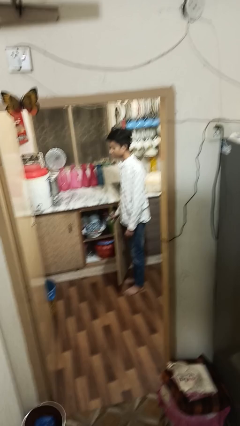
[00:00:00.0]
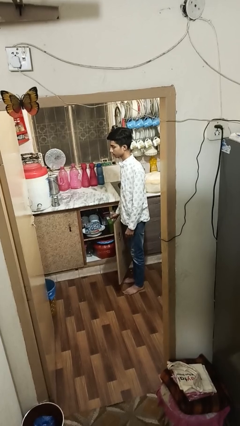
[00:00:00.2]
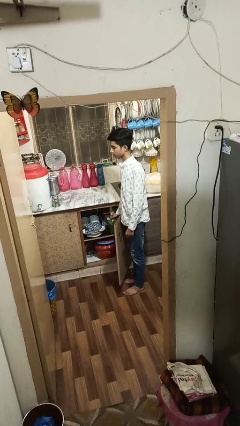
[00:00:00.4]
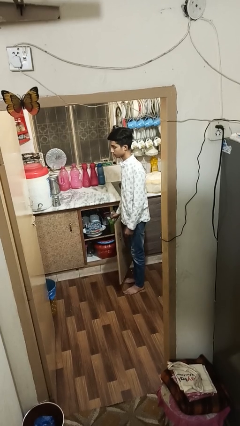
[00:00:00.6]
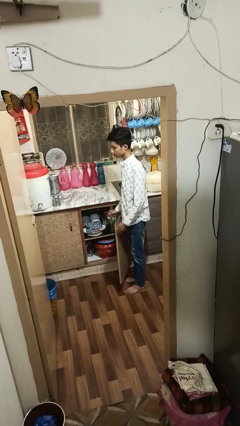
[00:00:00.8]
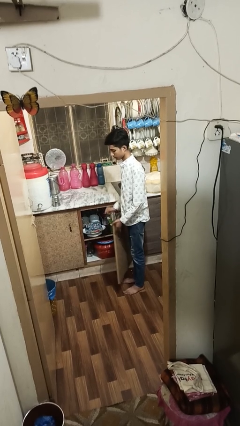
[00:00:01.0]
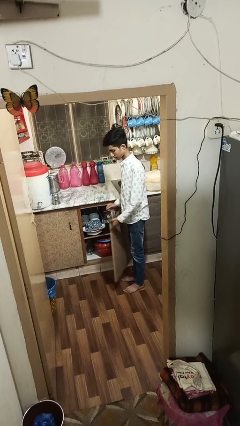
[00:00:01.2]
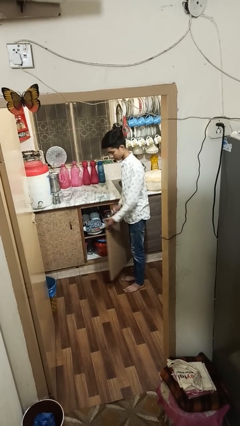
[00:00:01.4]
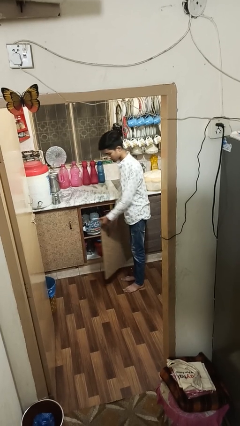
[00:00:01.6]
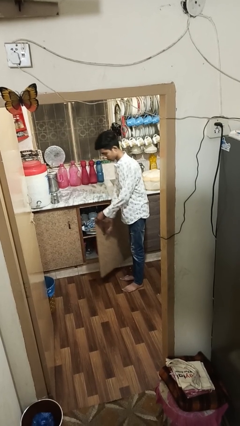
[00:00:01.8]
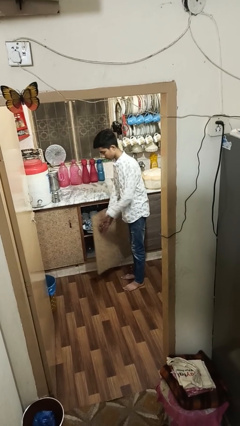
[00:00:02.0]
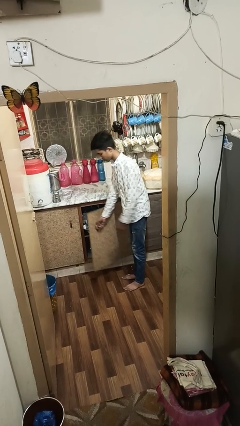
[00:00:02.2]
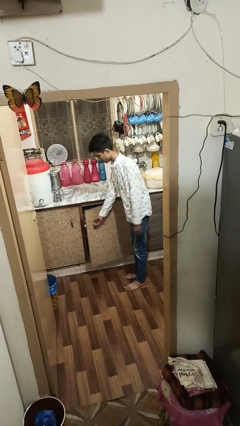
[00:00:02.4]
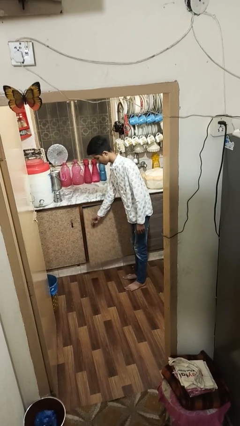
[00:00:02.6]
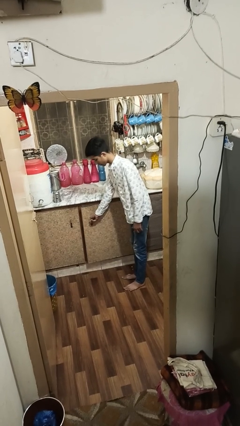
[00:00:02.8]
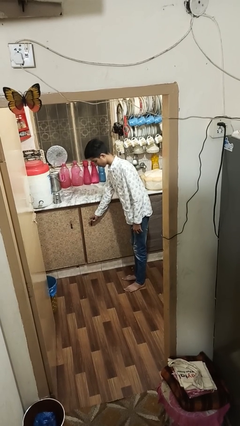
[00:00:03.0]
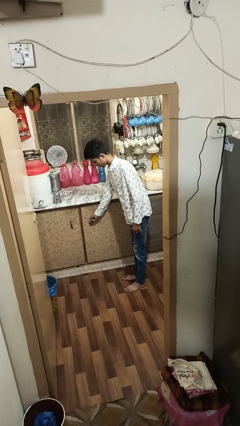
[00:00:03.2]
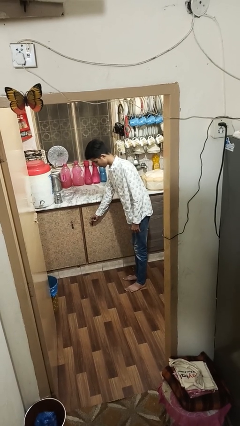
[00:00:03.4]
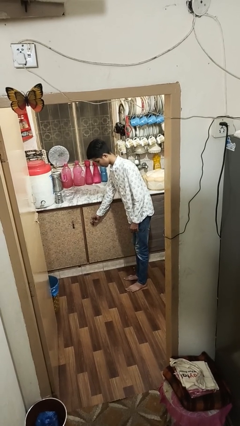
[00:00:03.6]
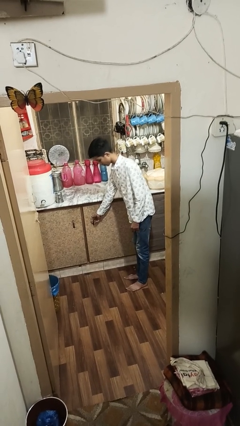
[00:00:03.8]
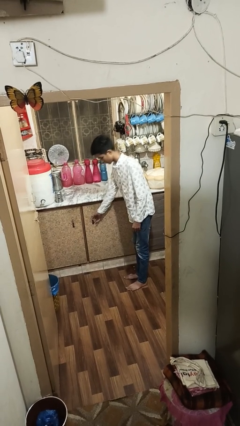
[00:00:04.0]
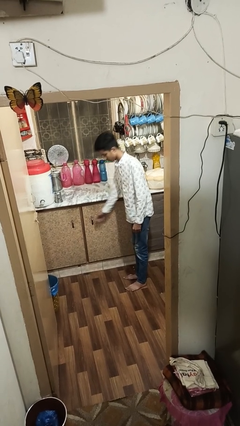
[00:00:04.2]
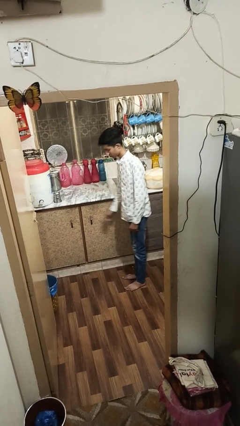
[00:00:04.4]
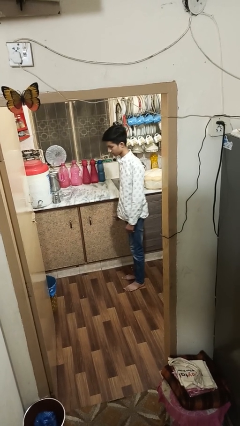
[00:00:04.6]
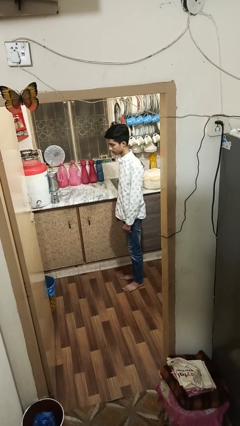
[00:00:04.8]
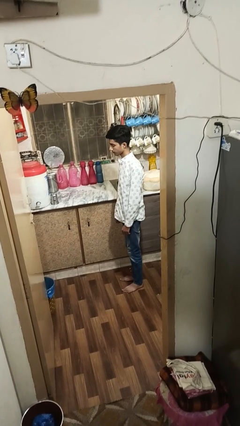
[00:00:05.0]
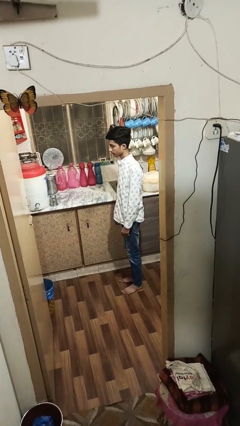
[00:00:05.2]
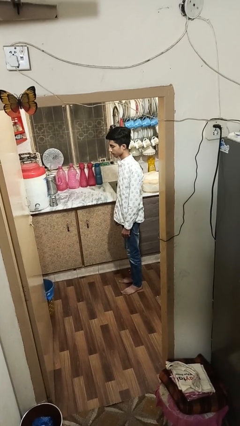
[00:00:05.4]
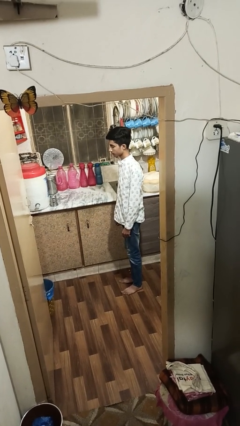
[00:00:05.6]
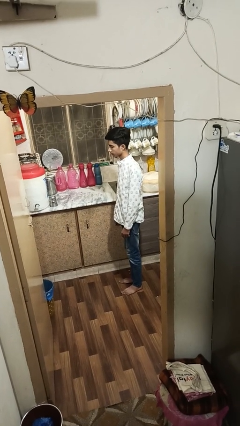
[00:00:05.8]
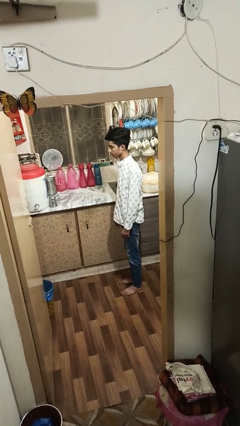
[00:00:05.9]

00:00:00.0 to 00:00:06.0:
person closes cabinet

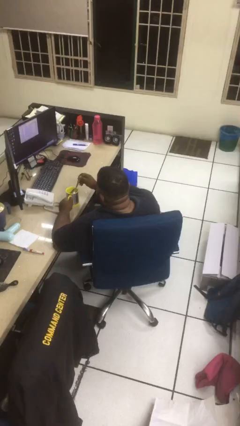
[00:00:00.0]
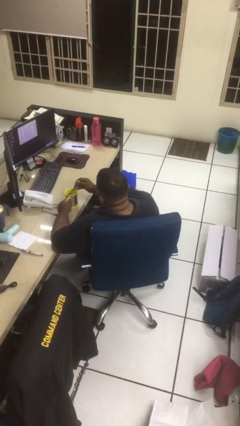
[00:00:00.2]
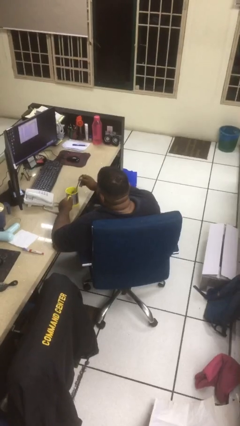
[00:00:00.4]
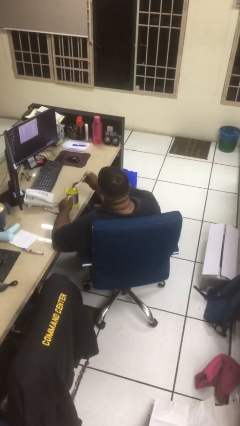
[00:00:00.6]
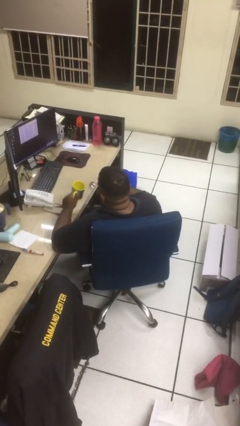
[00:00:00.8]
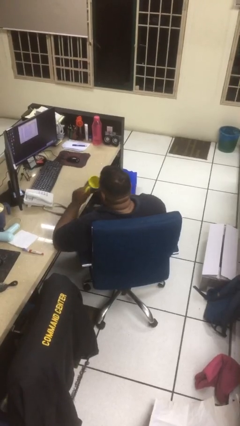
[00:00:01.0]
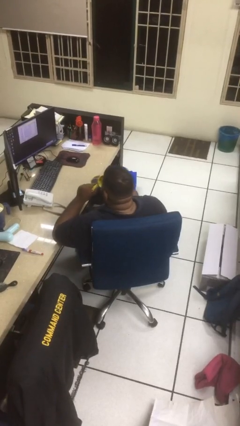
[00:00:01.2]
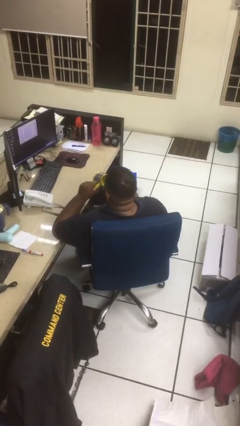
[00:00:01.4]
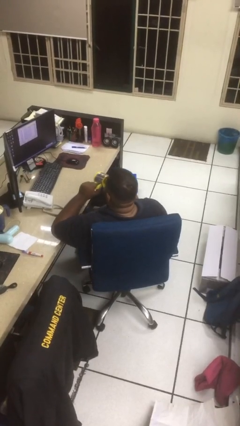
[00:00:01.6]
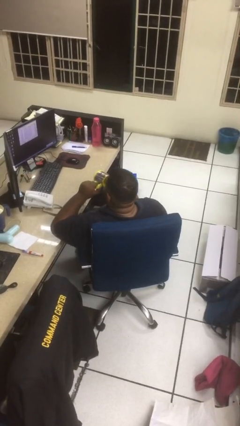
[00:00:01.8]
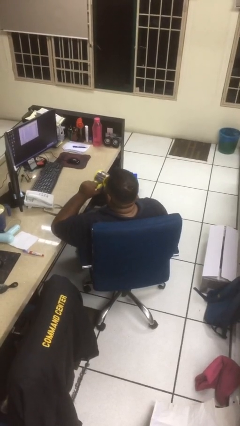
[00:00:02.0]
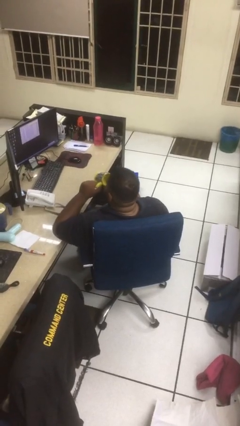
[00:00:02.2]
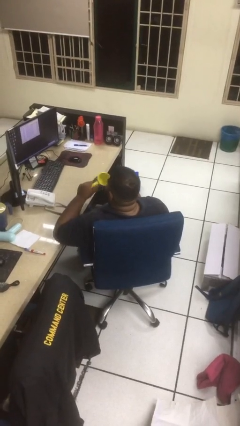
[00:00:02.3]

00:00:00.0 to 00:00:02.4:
person drinks from mug

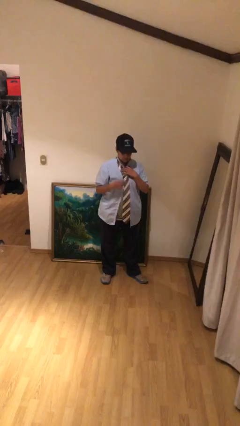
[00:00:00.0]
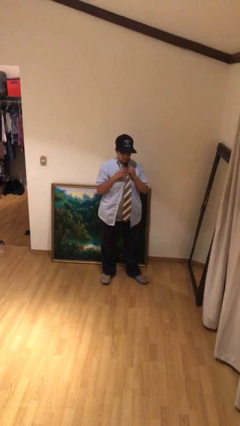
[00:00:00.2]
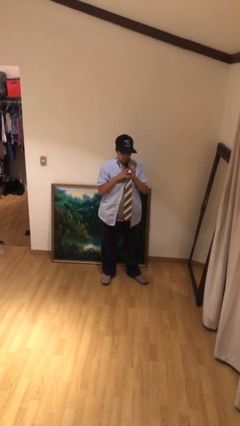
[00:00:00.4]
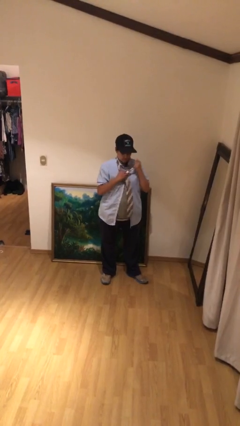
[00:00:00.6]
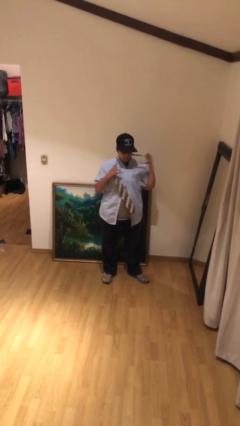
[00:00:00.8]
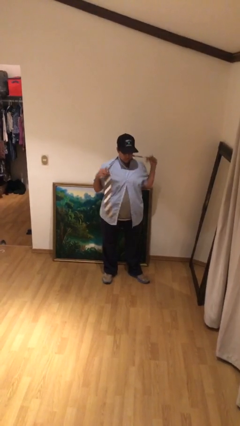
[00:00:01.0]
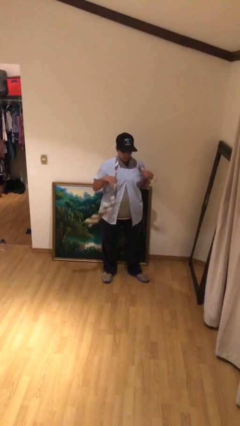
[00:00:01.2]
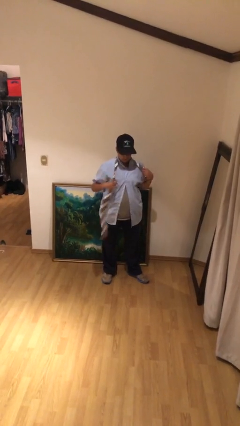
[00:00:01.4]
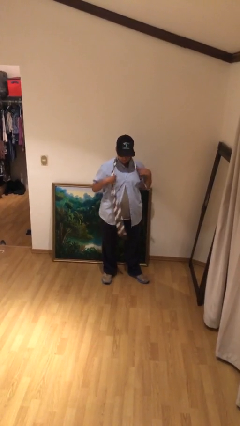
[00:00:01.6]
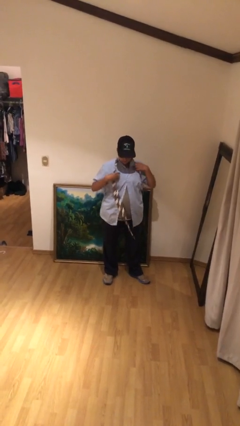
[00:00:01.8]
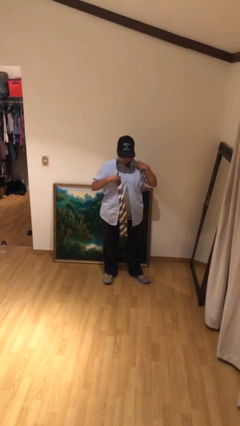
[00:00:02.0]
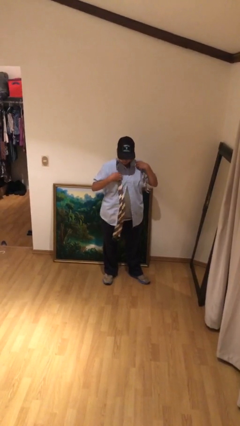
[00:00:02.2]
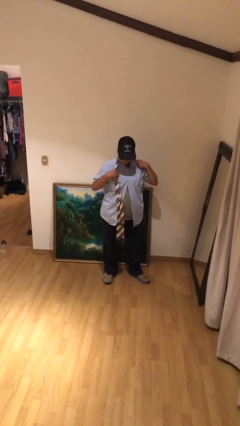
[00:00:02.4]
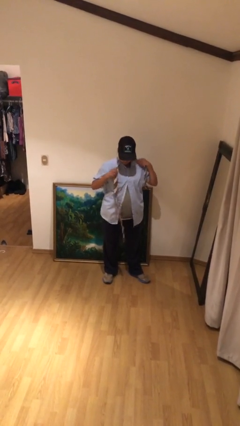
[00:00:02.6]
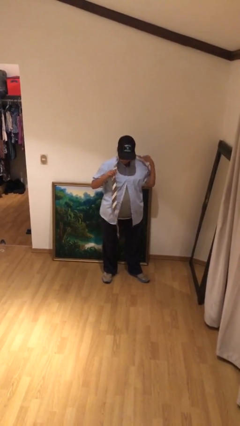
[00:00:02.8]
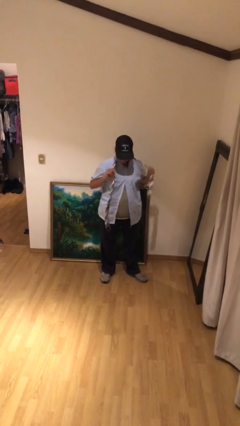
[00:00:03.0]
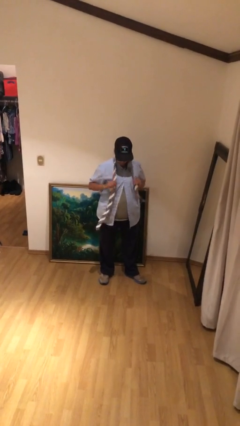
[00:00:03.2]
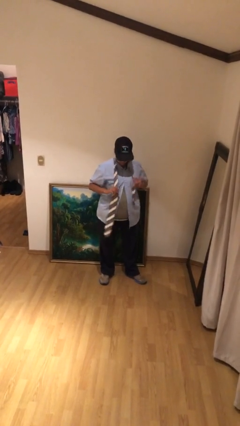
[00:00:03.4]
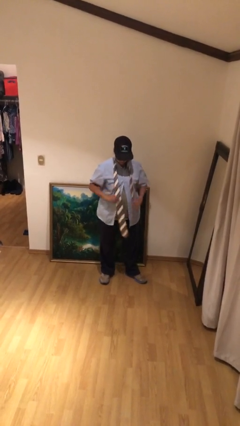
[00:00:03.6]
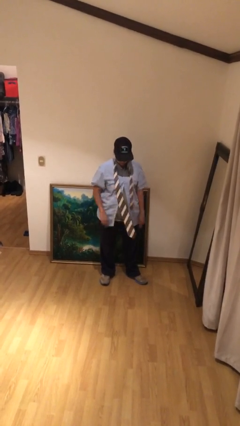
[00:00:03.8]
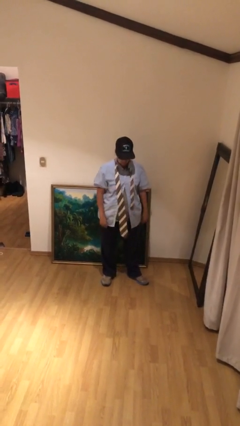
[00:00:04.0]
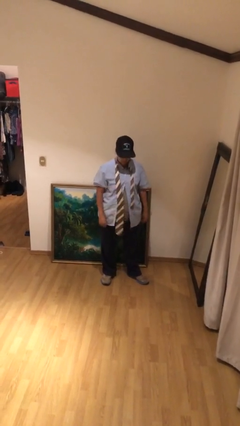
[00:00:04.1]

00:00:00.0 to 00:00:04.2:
person takes off necktie

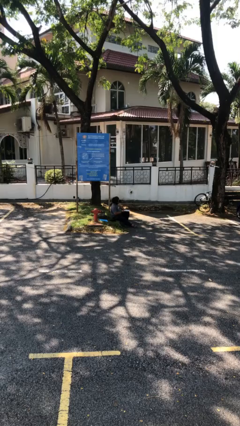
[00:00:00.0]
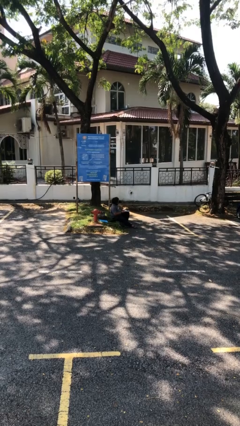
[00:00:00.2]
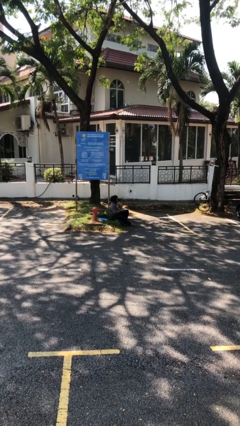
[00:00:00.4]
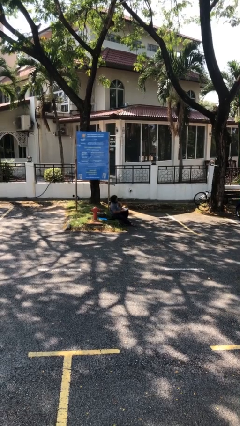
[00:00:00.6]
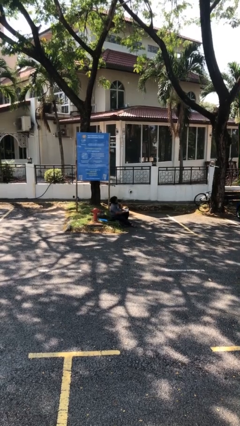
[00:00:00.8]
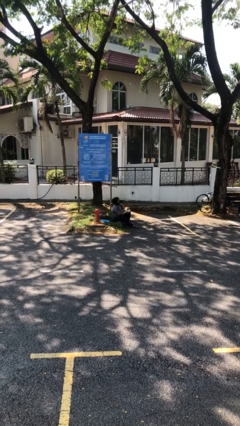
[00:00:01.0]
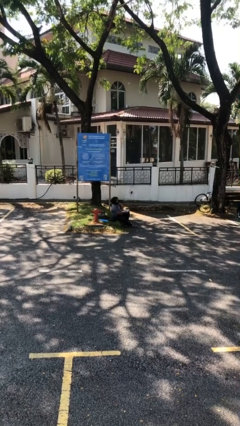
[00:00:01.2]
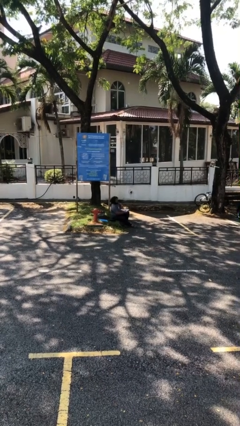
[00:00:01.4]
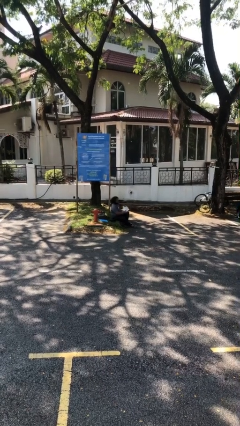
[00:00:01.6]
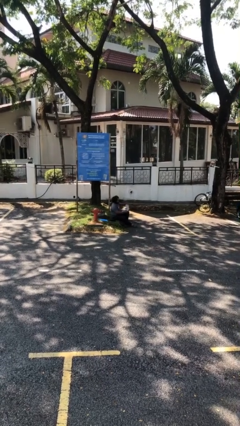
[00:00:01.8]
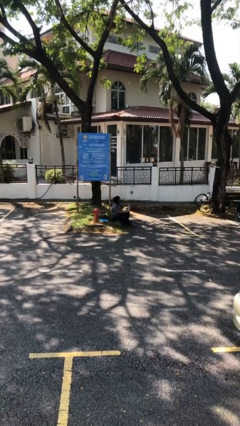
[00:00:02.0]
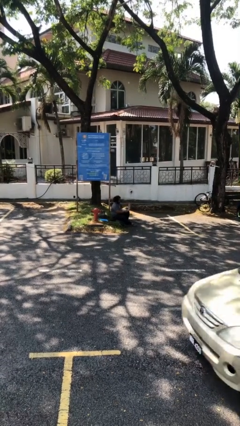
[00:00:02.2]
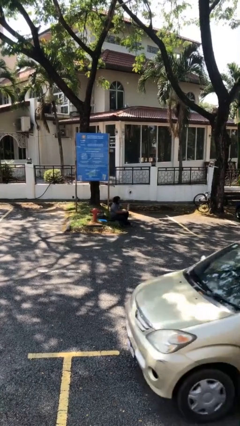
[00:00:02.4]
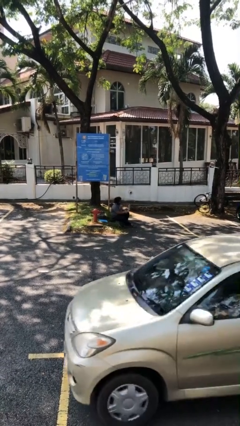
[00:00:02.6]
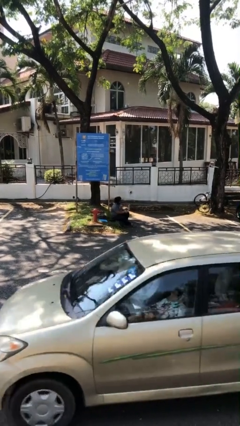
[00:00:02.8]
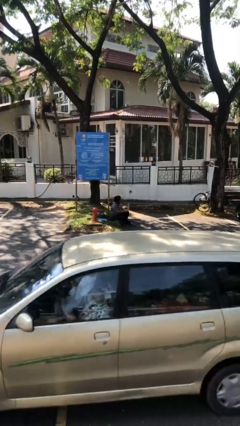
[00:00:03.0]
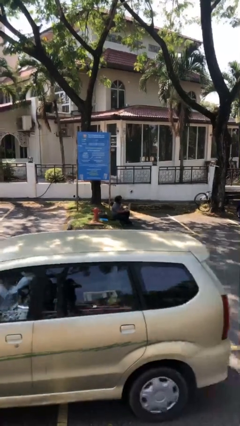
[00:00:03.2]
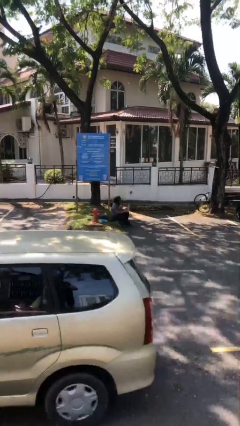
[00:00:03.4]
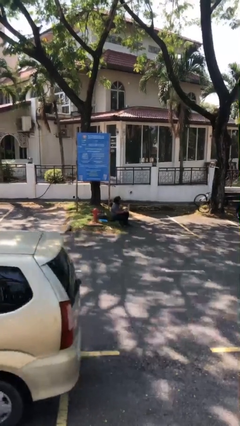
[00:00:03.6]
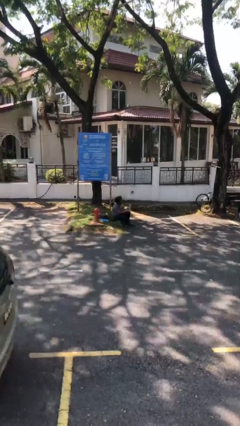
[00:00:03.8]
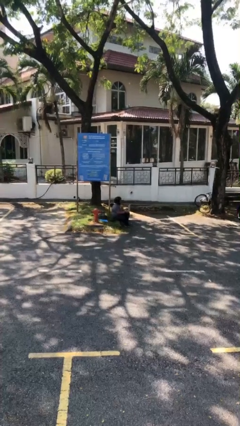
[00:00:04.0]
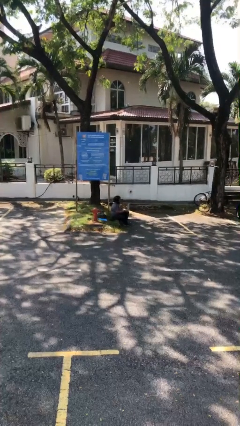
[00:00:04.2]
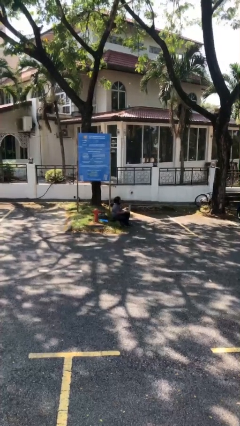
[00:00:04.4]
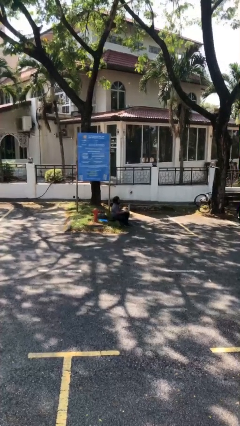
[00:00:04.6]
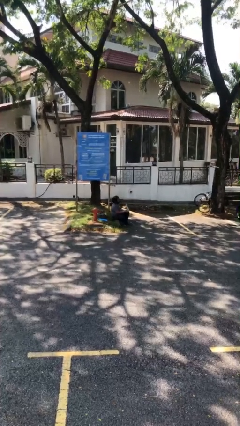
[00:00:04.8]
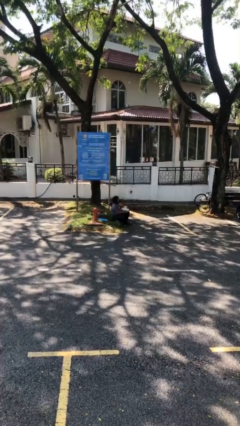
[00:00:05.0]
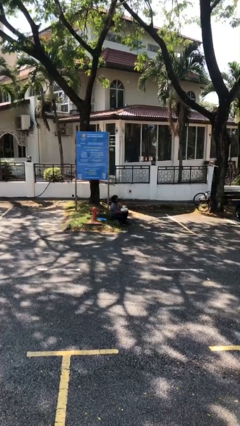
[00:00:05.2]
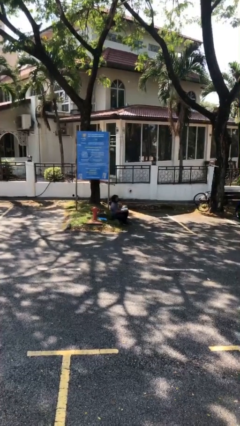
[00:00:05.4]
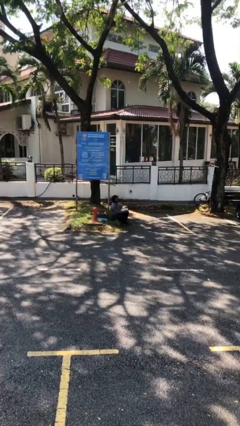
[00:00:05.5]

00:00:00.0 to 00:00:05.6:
person interacts with laptop
